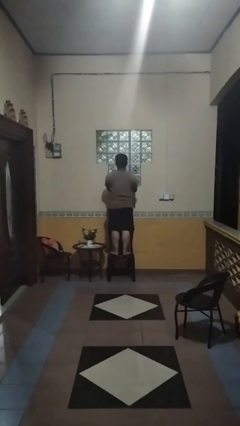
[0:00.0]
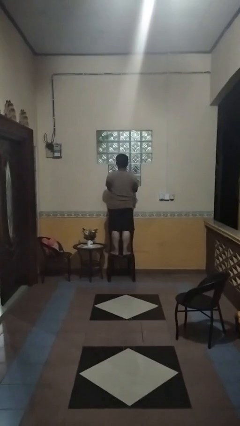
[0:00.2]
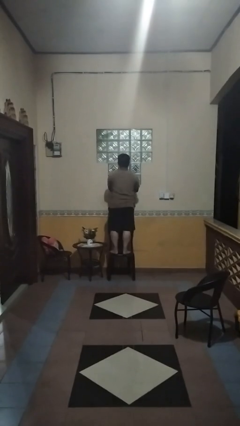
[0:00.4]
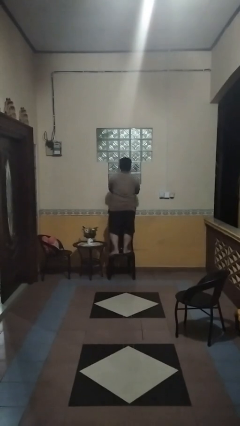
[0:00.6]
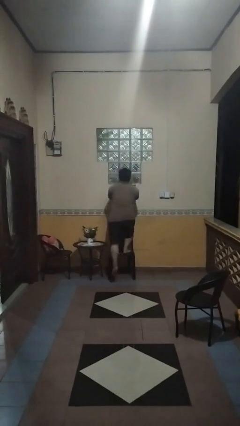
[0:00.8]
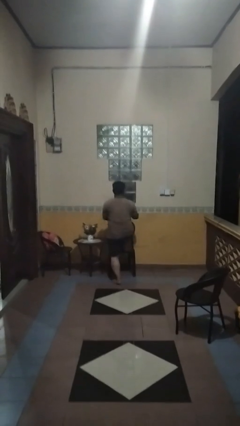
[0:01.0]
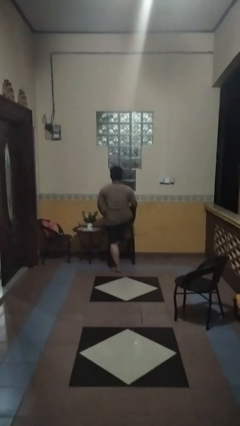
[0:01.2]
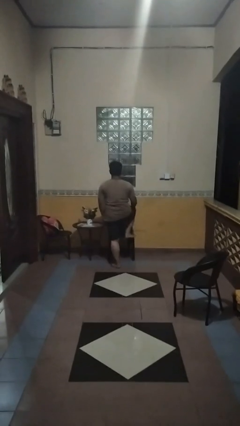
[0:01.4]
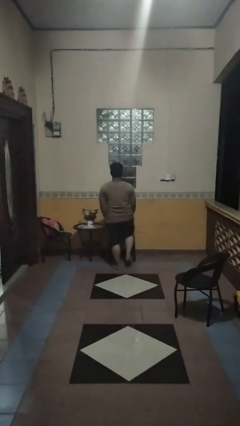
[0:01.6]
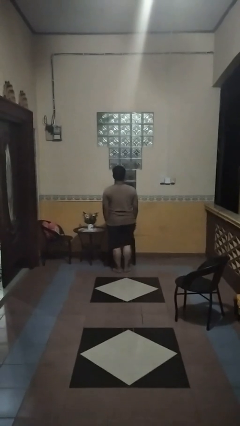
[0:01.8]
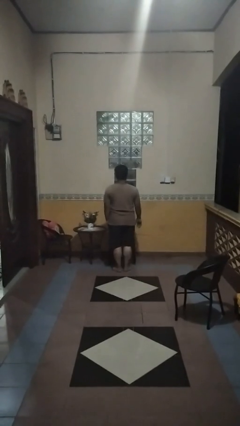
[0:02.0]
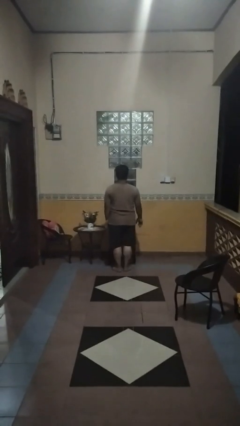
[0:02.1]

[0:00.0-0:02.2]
person climbs off chair

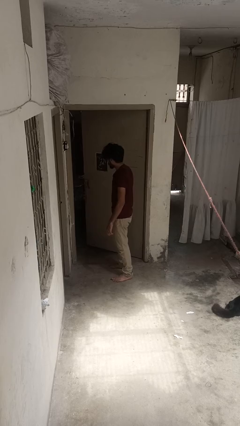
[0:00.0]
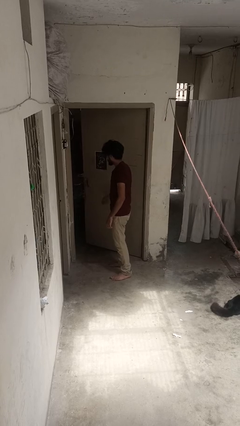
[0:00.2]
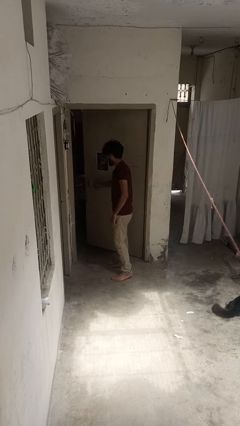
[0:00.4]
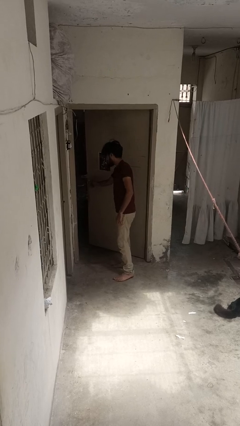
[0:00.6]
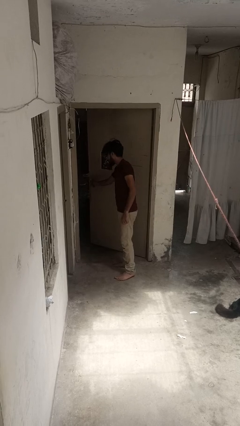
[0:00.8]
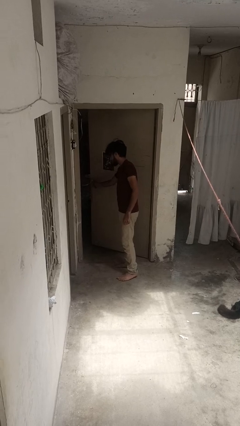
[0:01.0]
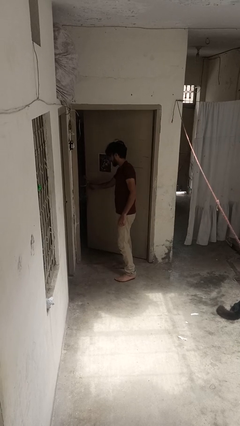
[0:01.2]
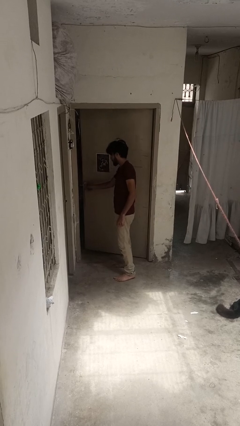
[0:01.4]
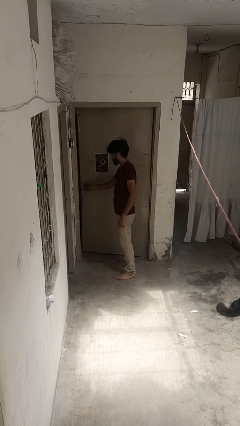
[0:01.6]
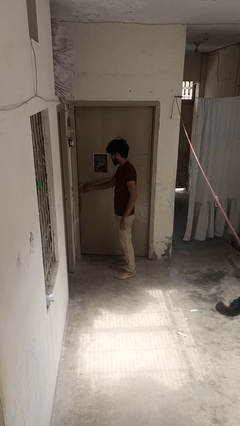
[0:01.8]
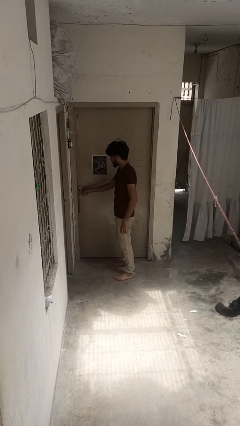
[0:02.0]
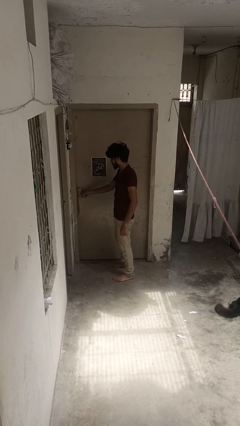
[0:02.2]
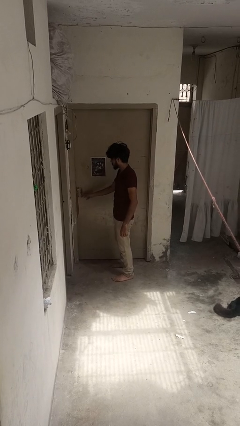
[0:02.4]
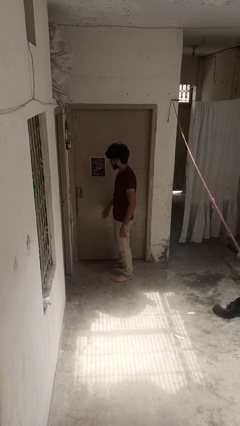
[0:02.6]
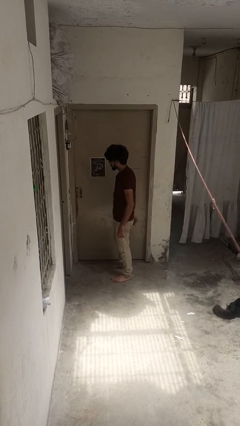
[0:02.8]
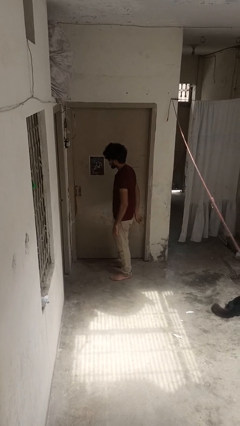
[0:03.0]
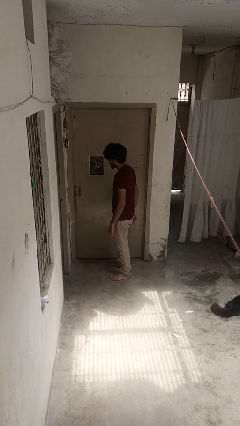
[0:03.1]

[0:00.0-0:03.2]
person closes gate

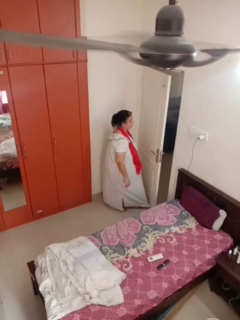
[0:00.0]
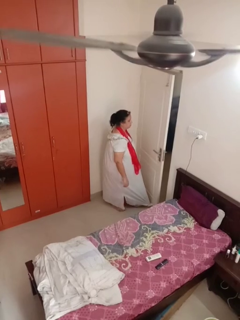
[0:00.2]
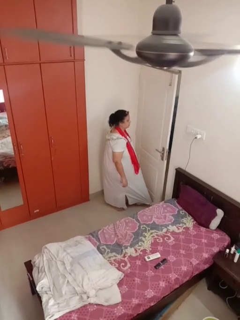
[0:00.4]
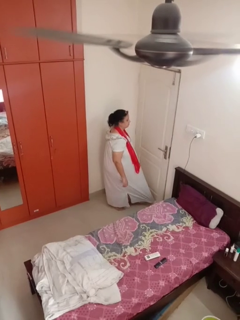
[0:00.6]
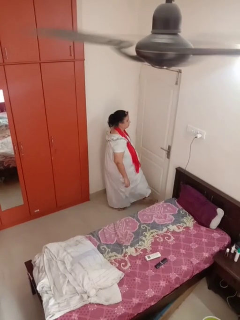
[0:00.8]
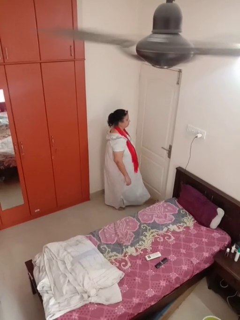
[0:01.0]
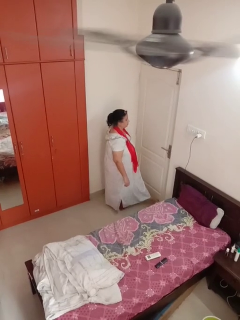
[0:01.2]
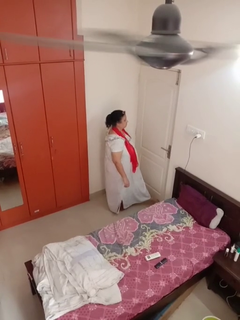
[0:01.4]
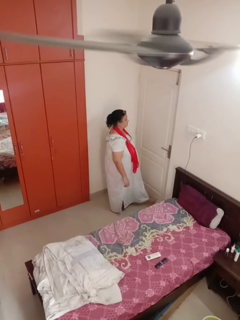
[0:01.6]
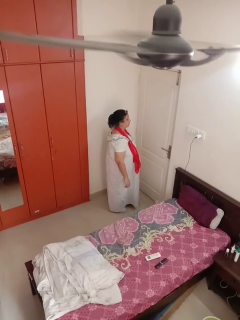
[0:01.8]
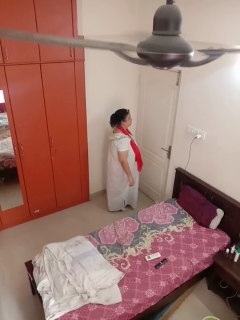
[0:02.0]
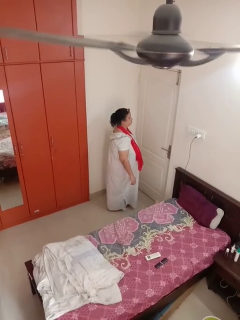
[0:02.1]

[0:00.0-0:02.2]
person closes door with foot

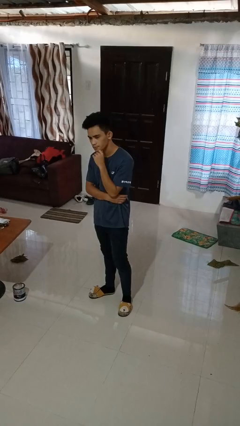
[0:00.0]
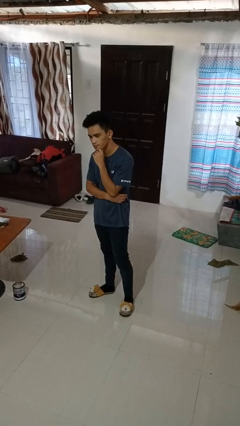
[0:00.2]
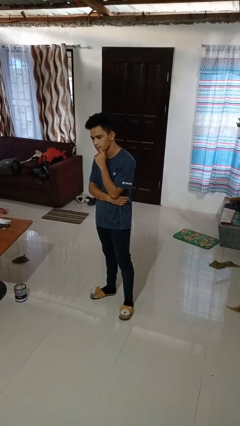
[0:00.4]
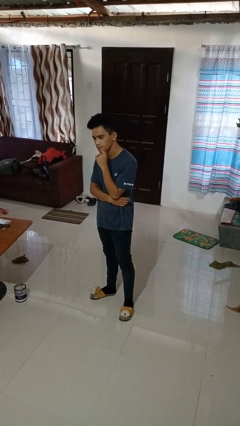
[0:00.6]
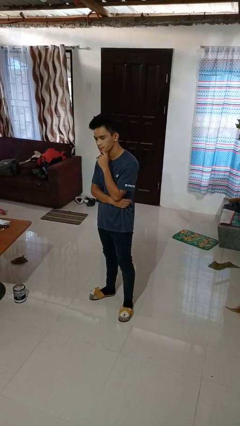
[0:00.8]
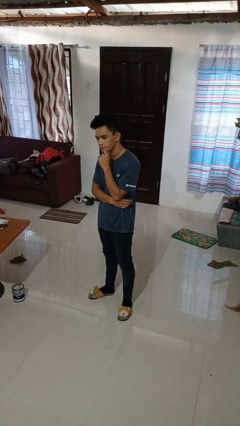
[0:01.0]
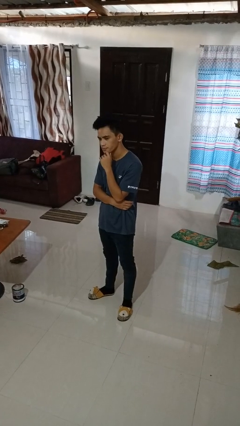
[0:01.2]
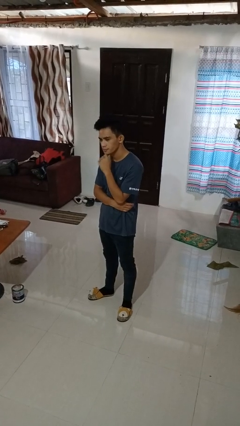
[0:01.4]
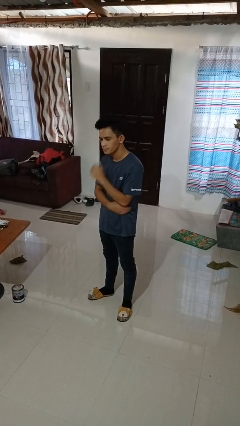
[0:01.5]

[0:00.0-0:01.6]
person strokes chin

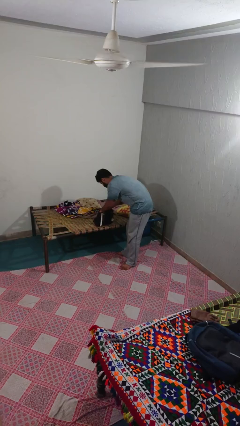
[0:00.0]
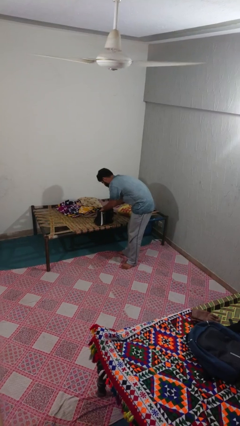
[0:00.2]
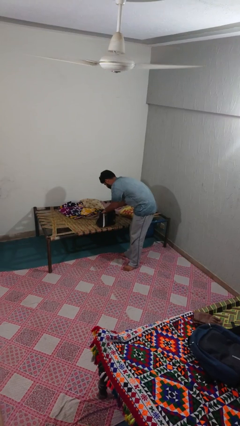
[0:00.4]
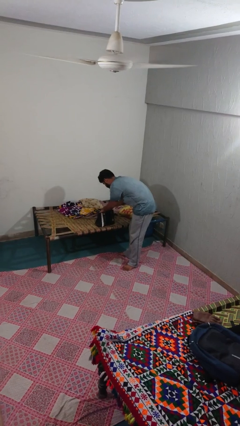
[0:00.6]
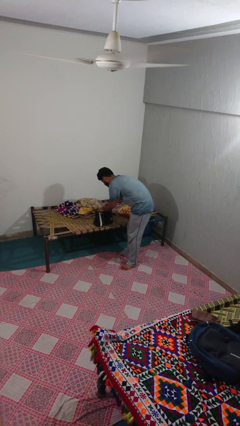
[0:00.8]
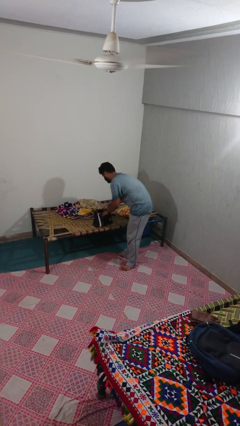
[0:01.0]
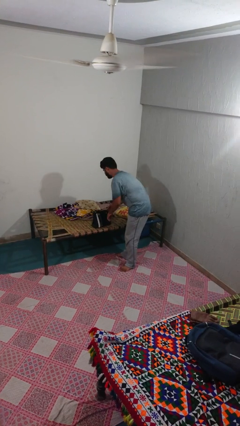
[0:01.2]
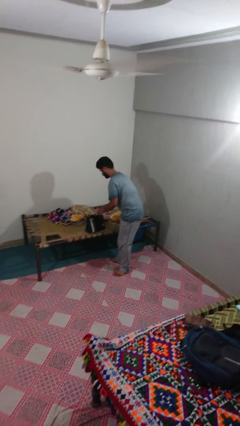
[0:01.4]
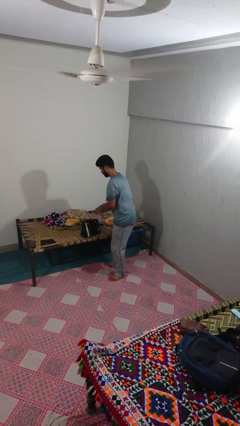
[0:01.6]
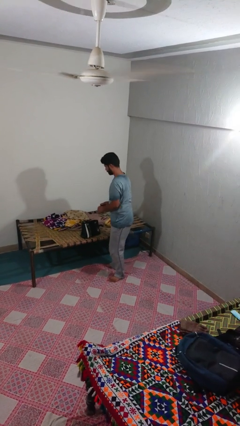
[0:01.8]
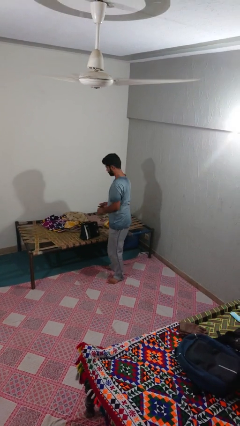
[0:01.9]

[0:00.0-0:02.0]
person takes object from purse

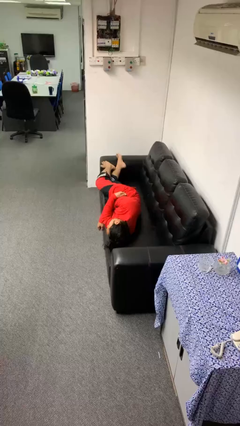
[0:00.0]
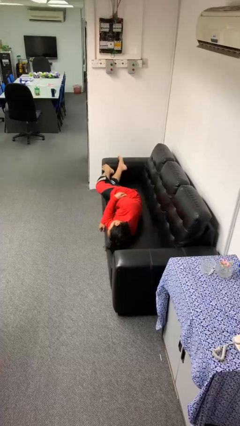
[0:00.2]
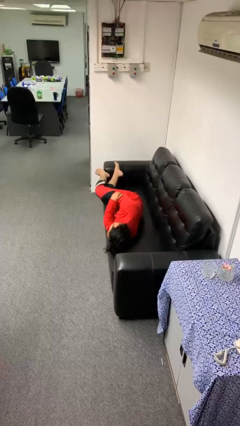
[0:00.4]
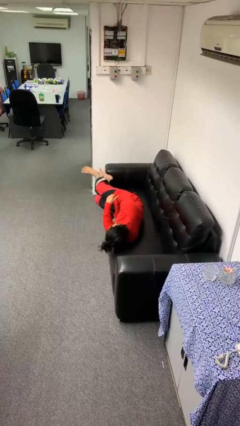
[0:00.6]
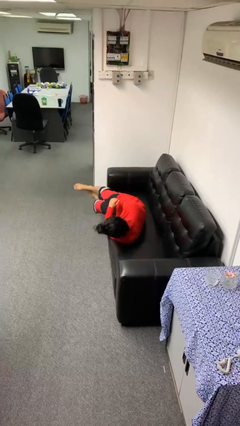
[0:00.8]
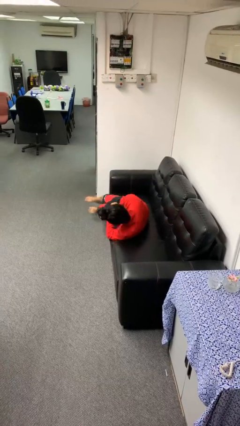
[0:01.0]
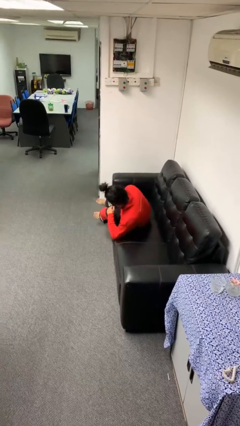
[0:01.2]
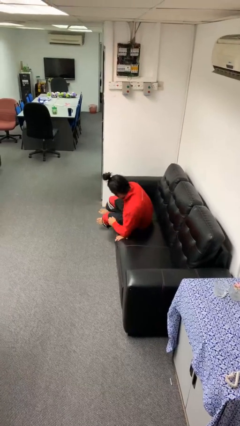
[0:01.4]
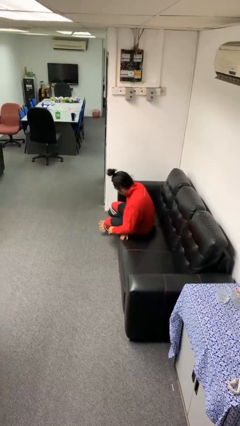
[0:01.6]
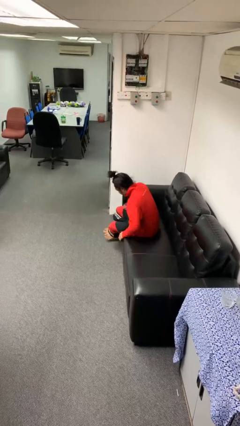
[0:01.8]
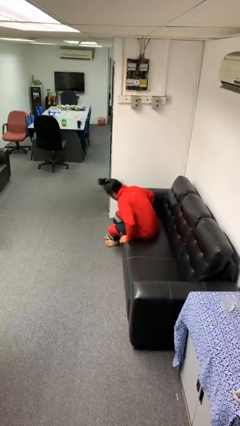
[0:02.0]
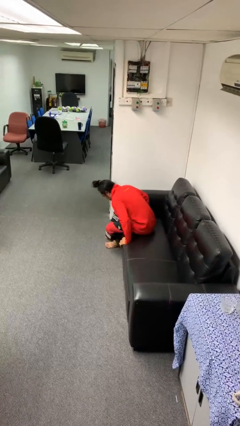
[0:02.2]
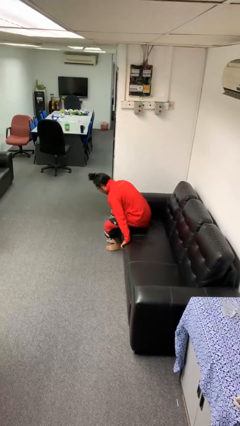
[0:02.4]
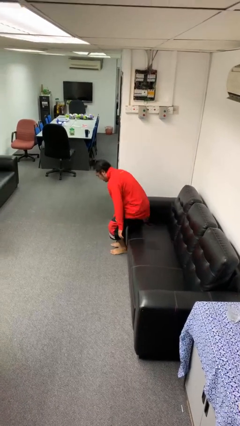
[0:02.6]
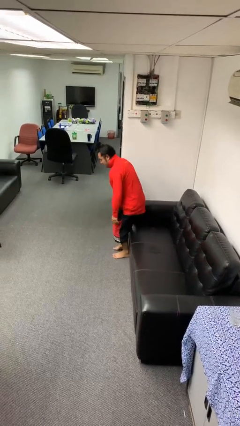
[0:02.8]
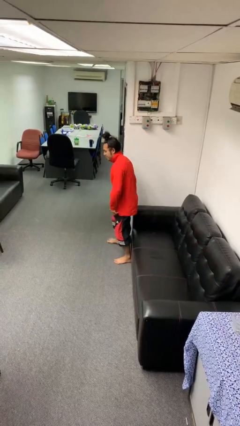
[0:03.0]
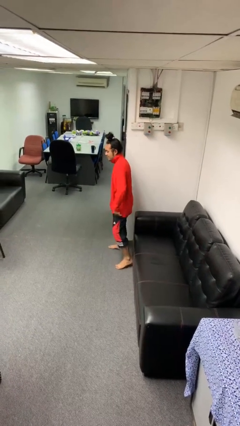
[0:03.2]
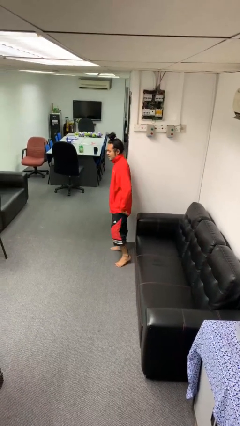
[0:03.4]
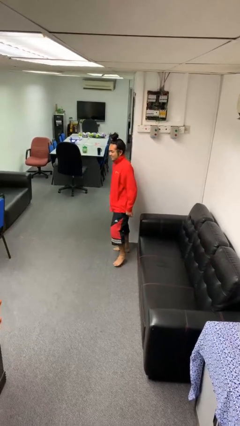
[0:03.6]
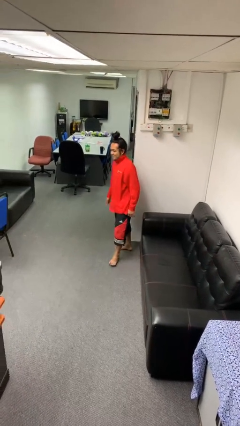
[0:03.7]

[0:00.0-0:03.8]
person stands up

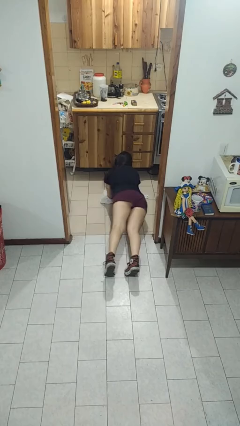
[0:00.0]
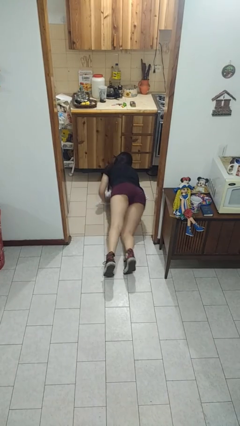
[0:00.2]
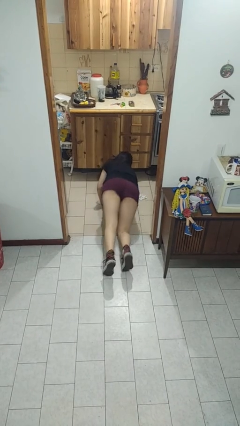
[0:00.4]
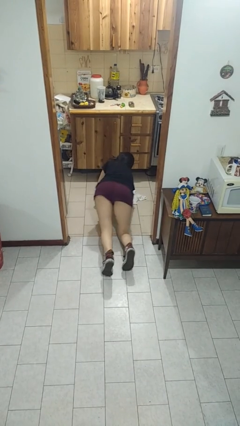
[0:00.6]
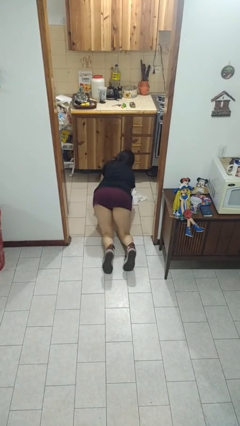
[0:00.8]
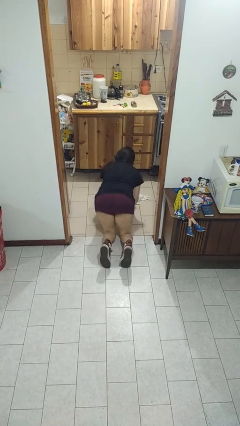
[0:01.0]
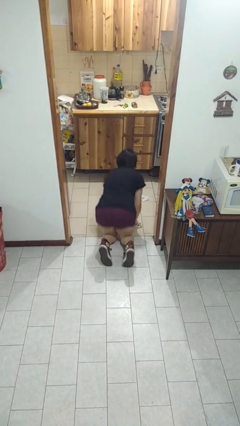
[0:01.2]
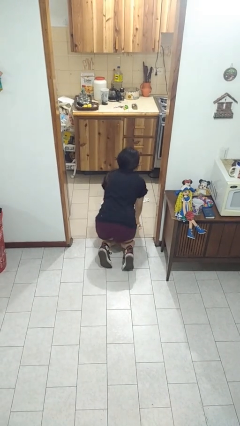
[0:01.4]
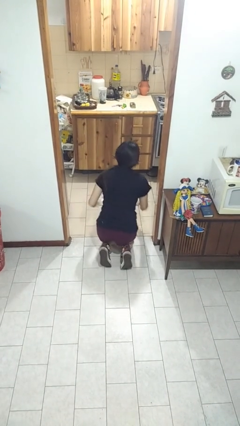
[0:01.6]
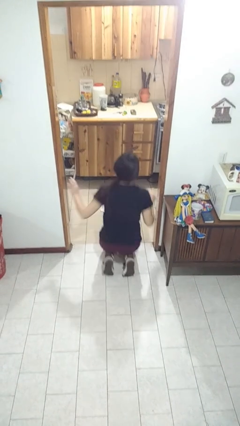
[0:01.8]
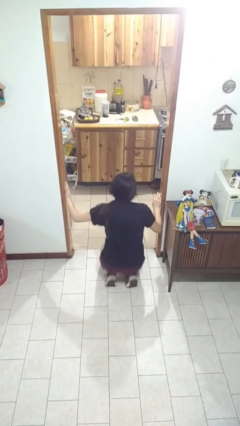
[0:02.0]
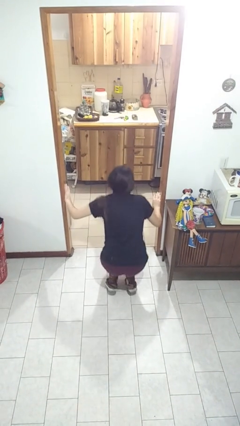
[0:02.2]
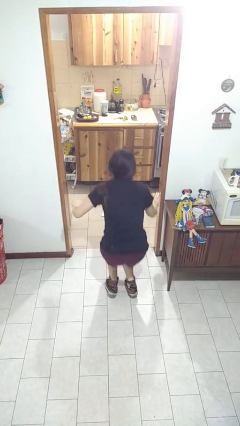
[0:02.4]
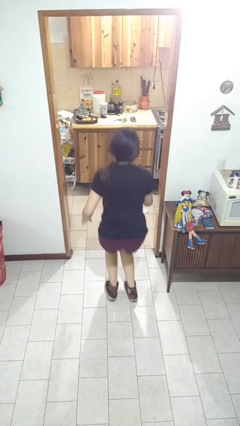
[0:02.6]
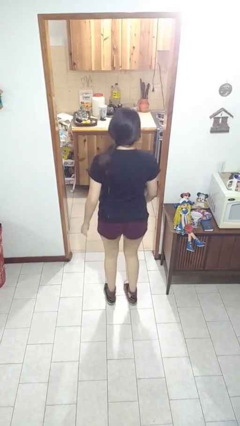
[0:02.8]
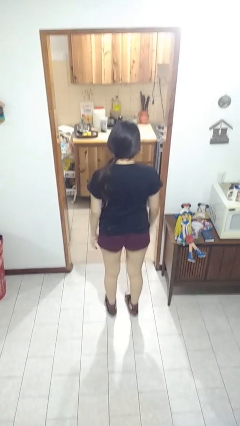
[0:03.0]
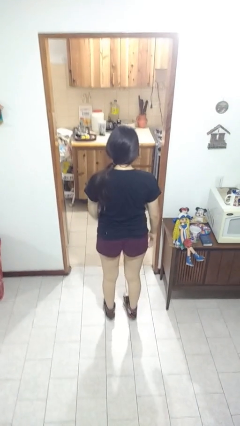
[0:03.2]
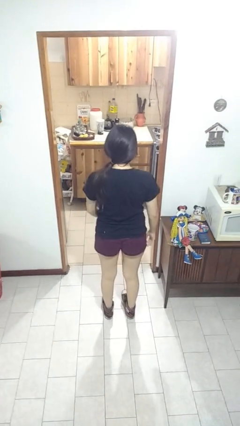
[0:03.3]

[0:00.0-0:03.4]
person stands up from floor
